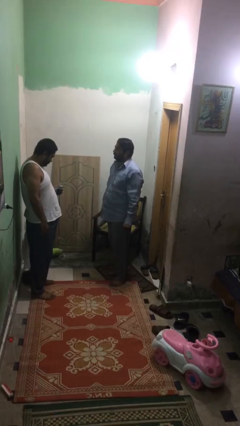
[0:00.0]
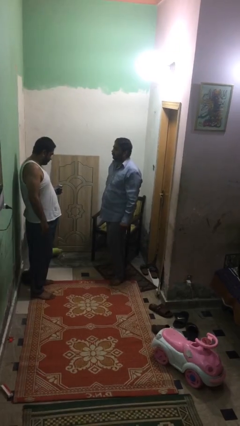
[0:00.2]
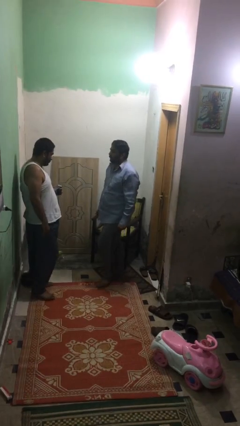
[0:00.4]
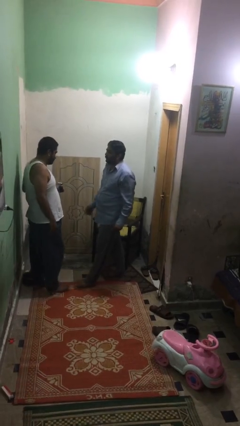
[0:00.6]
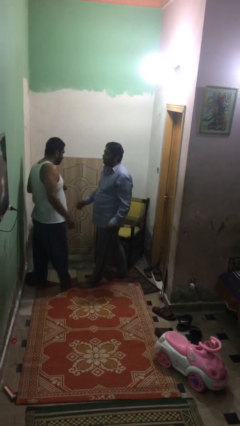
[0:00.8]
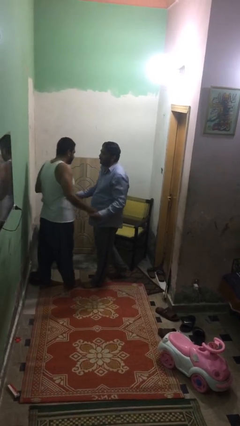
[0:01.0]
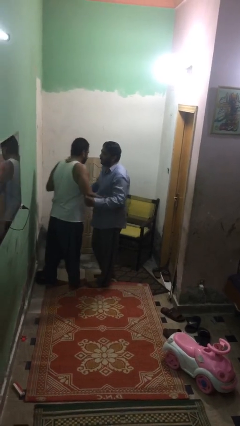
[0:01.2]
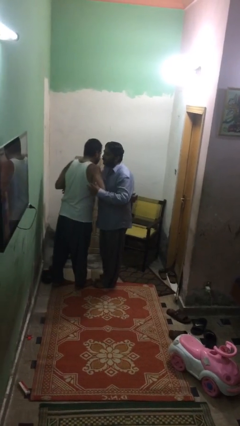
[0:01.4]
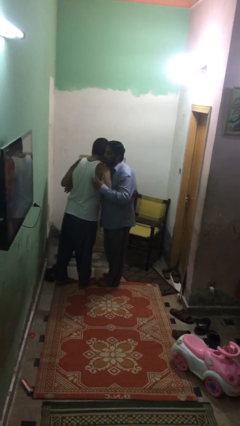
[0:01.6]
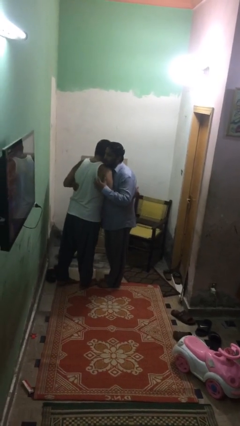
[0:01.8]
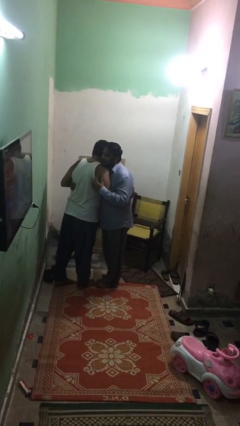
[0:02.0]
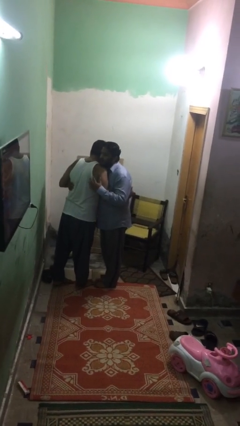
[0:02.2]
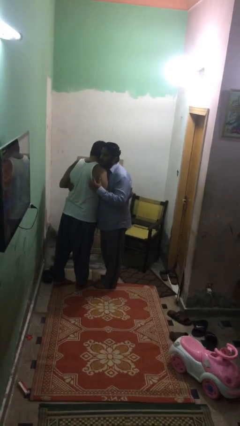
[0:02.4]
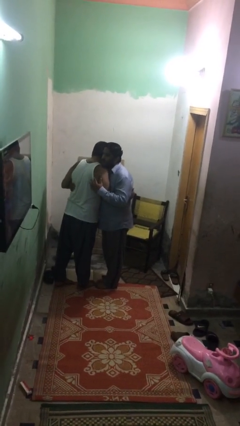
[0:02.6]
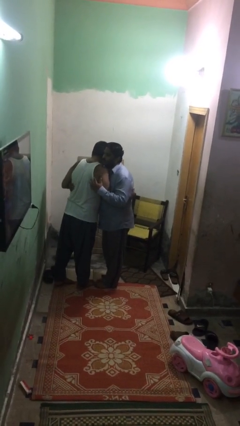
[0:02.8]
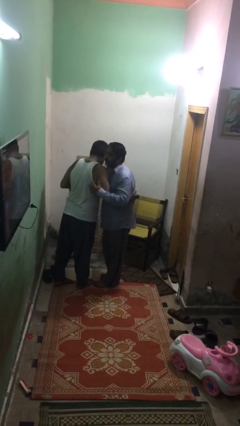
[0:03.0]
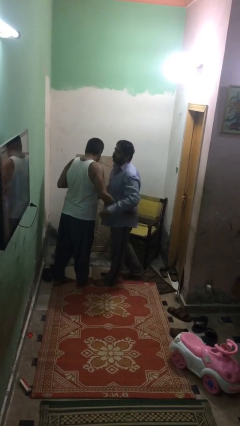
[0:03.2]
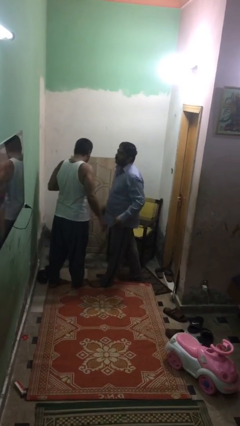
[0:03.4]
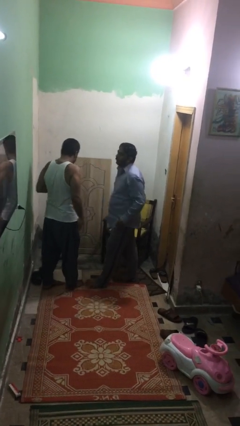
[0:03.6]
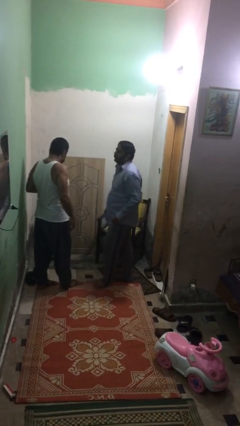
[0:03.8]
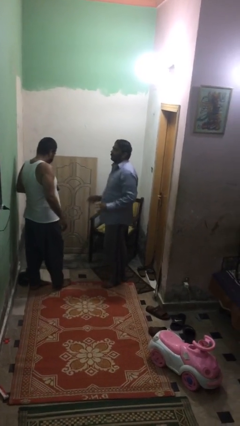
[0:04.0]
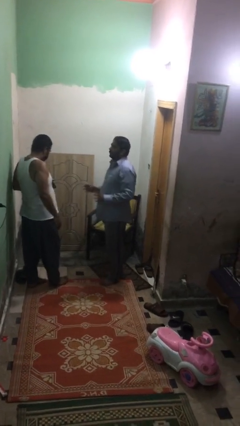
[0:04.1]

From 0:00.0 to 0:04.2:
person embraces person

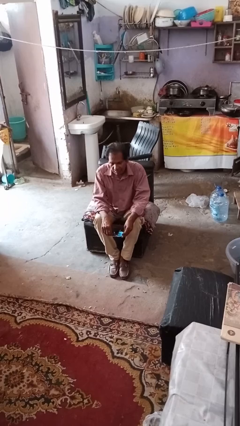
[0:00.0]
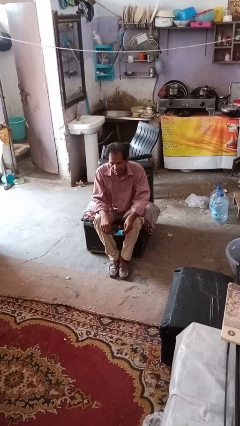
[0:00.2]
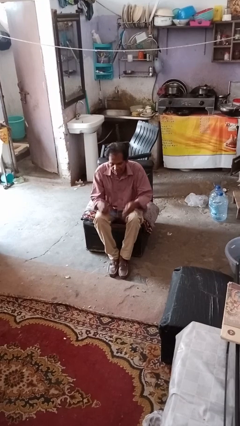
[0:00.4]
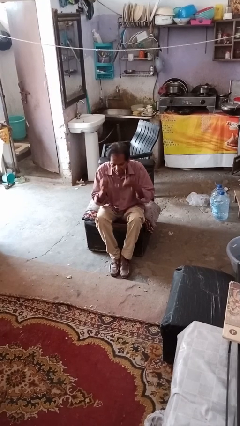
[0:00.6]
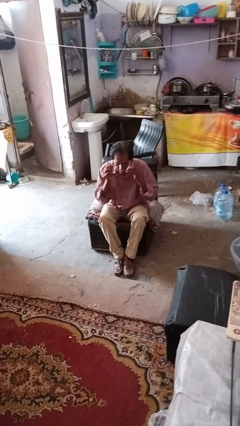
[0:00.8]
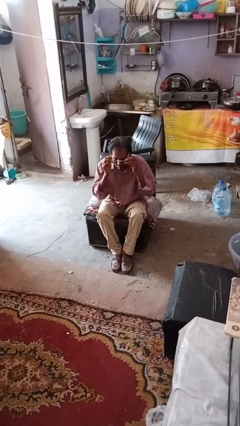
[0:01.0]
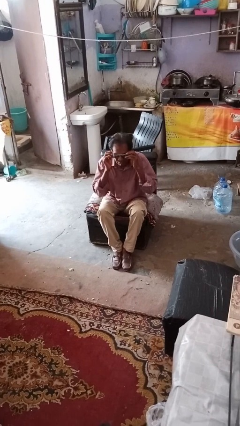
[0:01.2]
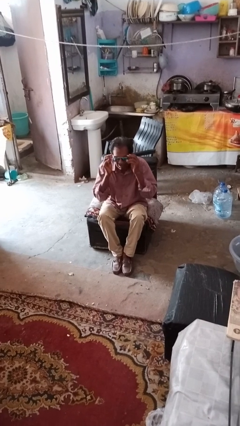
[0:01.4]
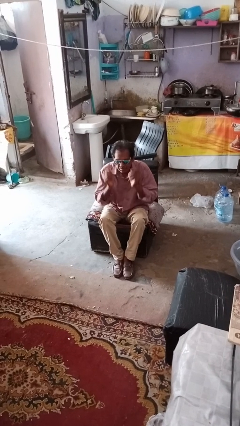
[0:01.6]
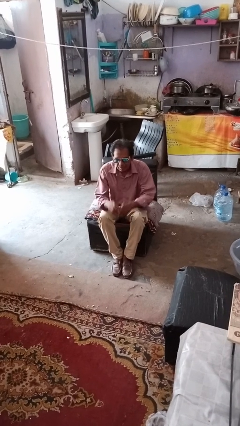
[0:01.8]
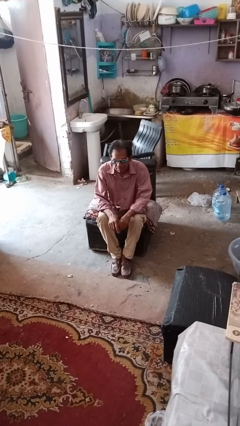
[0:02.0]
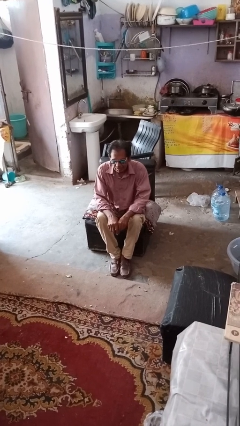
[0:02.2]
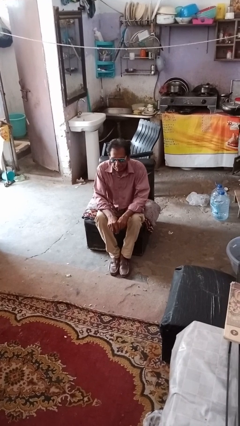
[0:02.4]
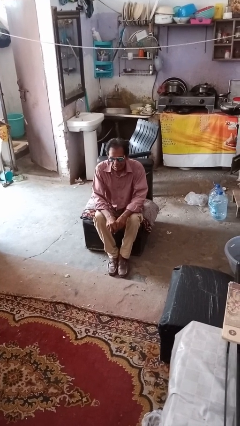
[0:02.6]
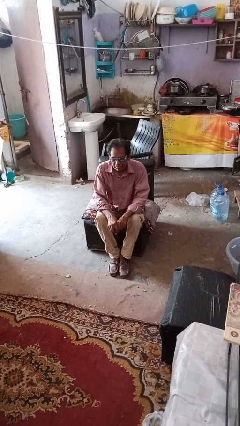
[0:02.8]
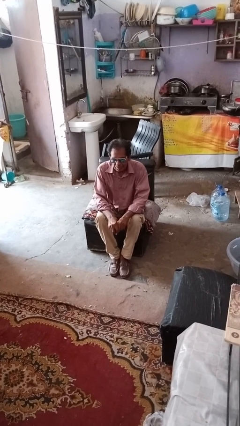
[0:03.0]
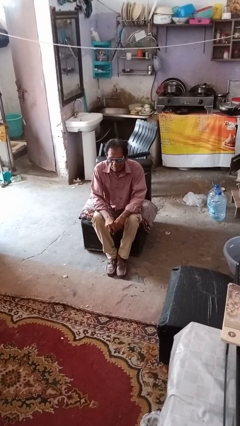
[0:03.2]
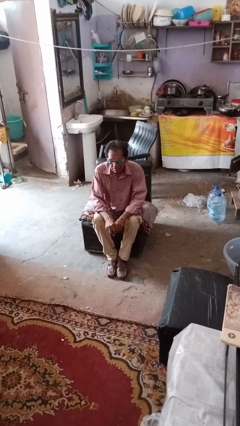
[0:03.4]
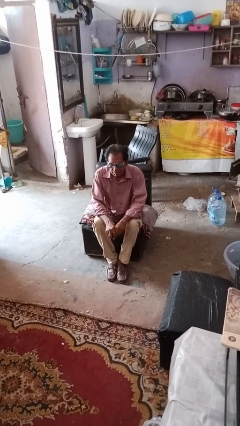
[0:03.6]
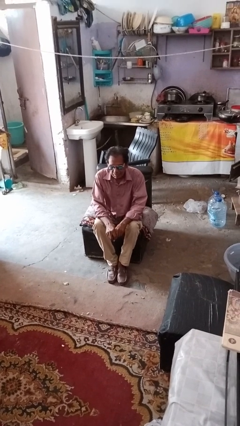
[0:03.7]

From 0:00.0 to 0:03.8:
person puts on sunglasses

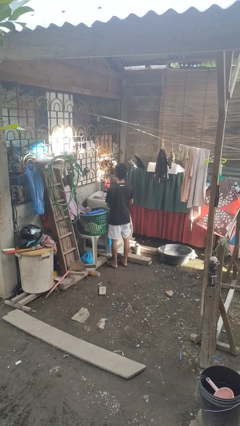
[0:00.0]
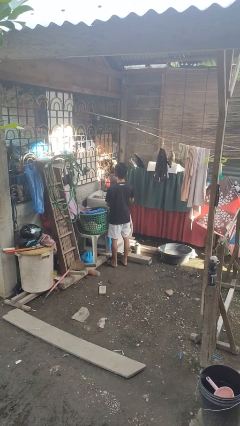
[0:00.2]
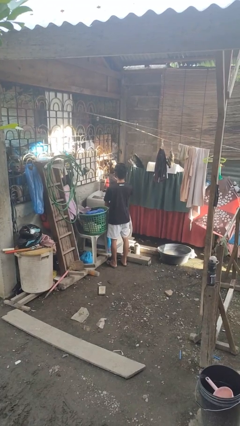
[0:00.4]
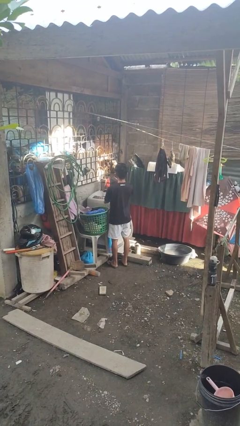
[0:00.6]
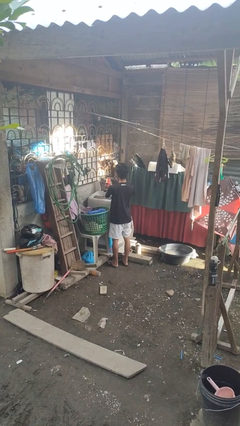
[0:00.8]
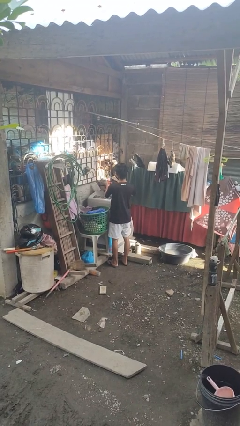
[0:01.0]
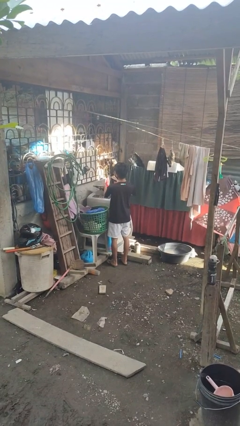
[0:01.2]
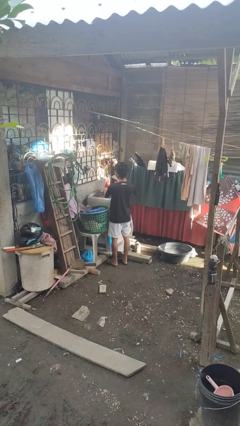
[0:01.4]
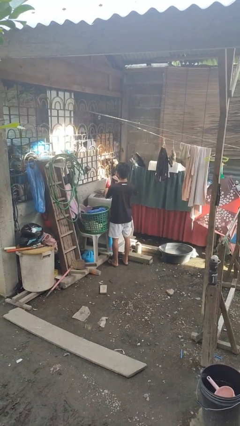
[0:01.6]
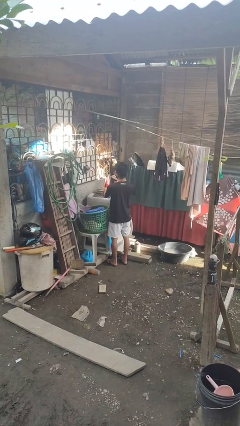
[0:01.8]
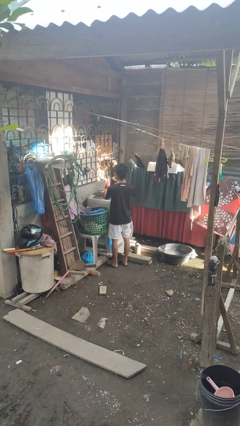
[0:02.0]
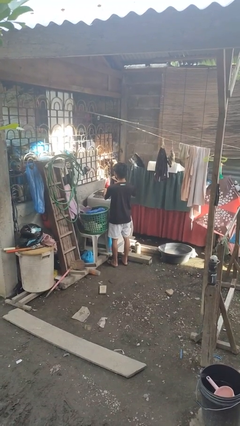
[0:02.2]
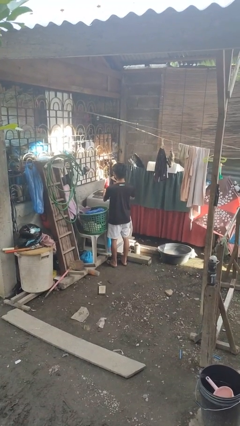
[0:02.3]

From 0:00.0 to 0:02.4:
person closes clothes washer

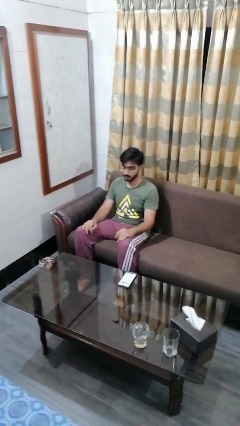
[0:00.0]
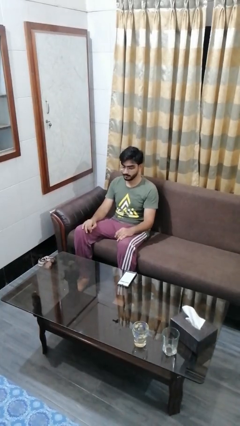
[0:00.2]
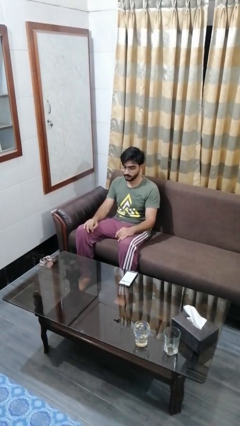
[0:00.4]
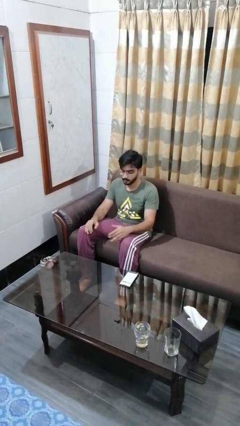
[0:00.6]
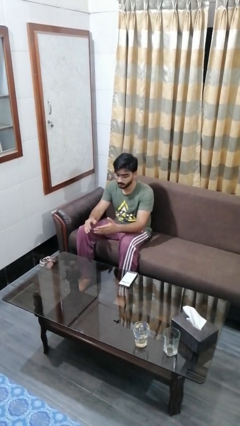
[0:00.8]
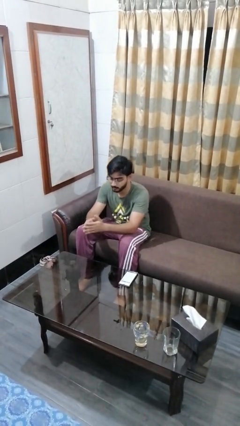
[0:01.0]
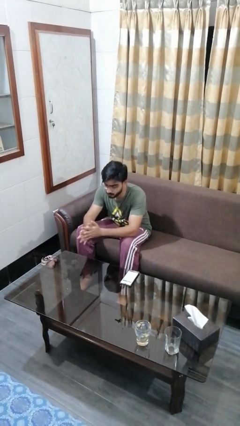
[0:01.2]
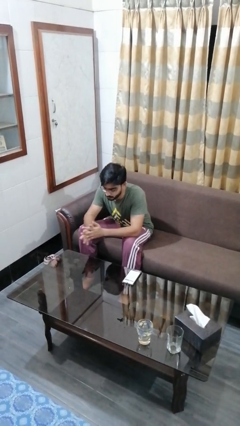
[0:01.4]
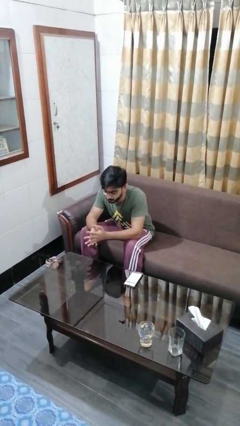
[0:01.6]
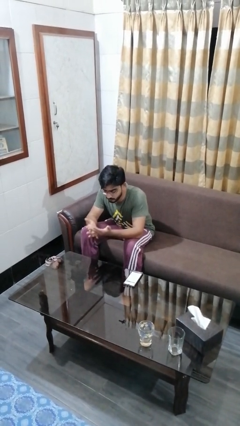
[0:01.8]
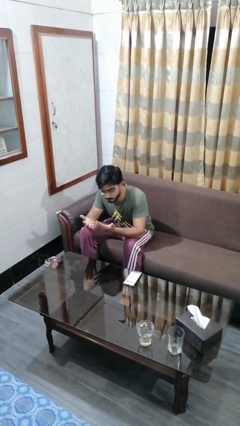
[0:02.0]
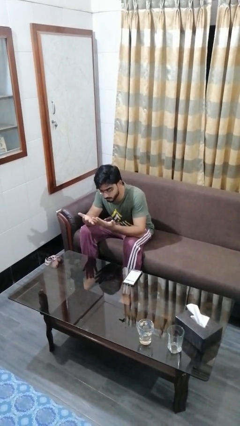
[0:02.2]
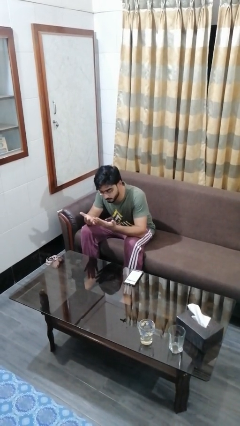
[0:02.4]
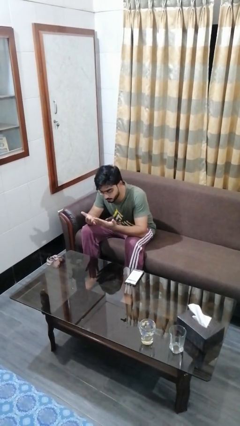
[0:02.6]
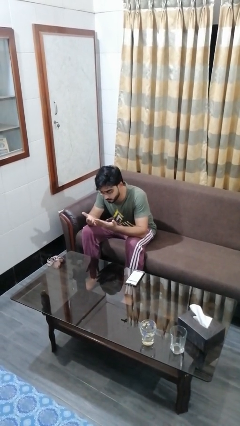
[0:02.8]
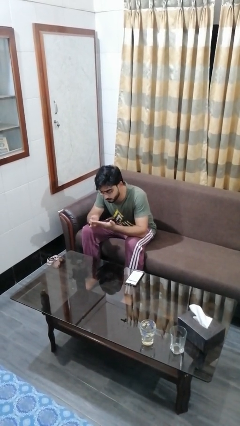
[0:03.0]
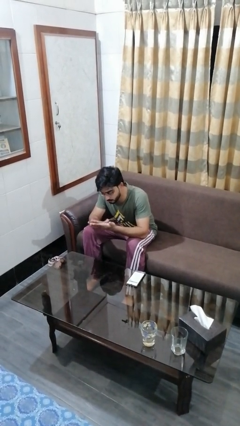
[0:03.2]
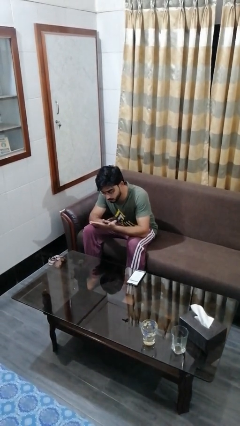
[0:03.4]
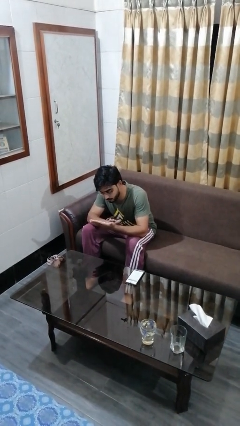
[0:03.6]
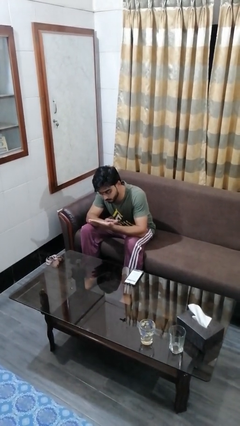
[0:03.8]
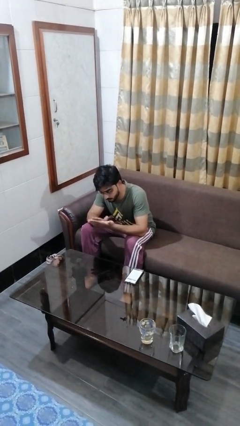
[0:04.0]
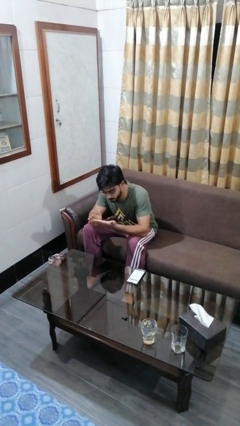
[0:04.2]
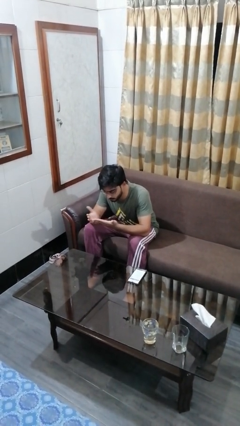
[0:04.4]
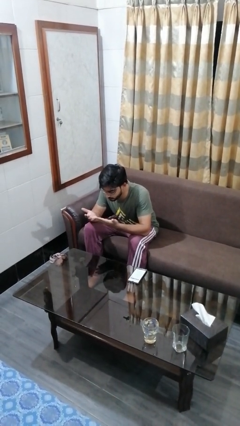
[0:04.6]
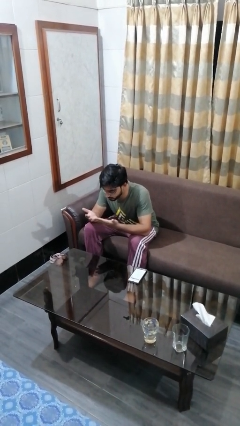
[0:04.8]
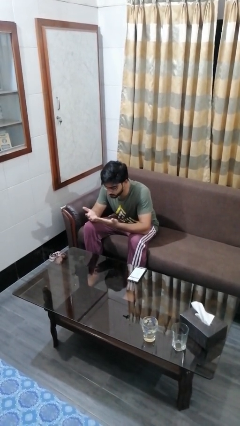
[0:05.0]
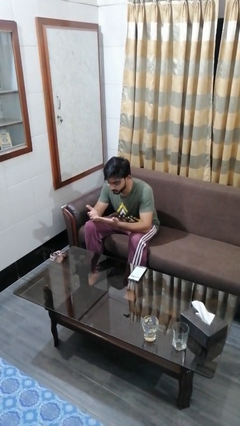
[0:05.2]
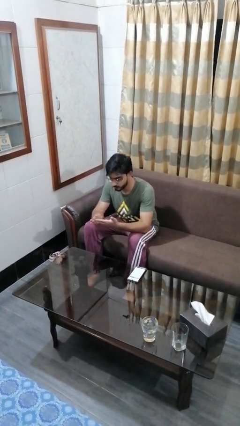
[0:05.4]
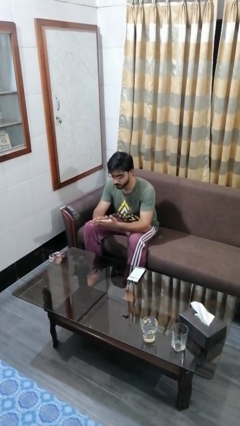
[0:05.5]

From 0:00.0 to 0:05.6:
person looks at hands in lap

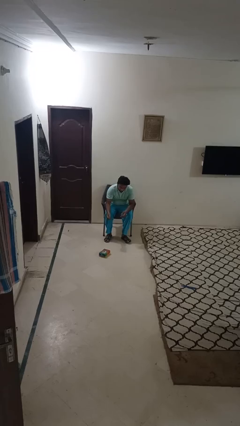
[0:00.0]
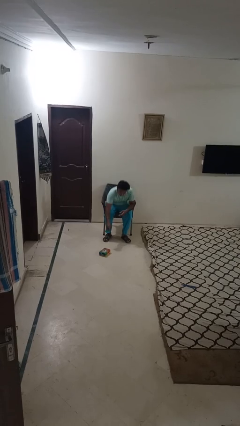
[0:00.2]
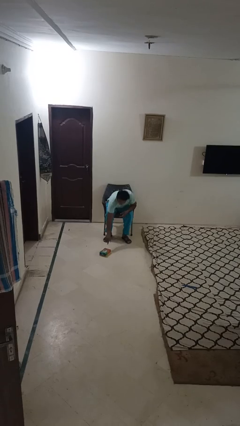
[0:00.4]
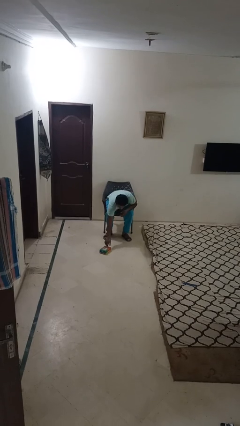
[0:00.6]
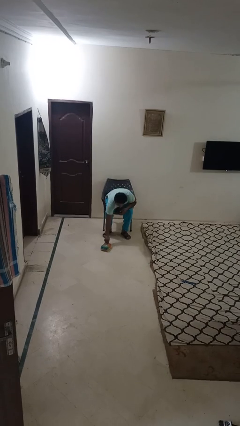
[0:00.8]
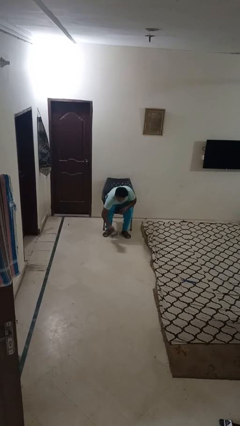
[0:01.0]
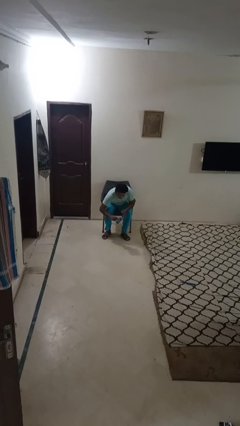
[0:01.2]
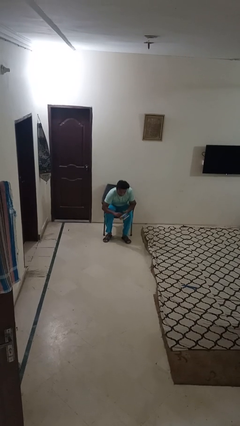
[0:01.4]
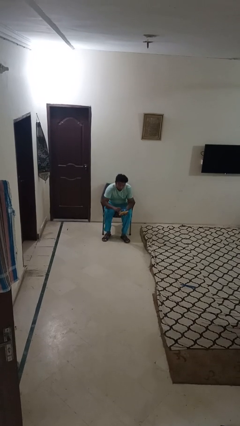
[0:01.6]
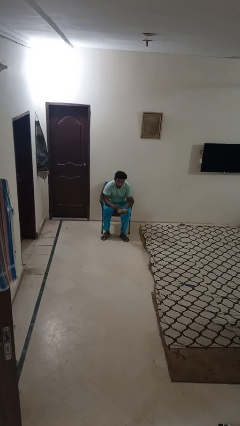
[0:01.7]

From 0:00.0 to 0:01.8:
person picks up object from floor

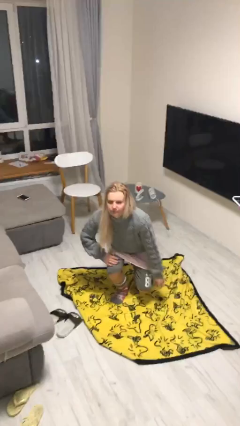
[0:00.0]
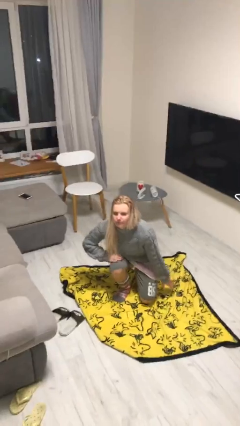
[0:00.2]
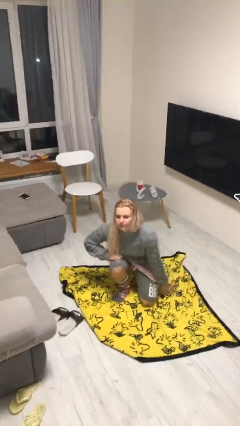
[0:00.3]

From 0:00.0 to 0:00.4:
person sits down
